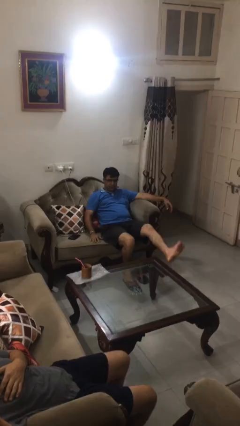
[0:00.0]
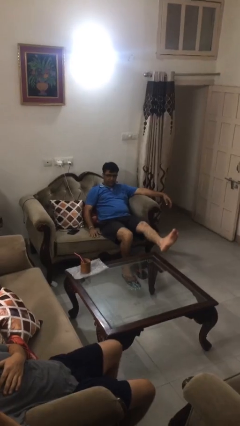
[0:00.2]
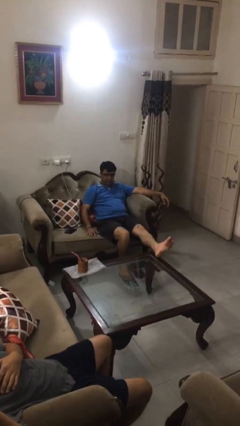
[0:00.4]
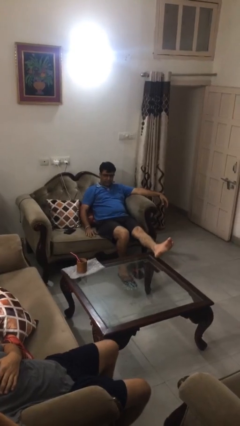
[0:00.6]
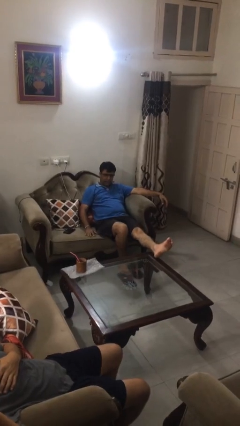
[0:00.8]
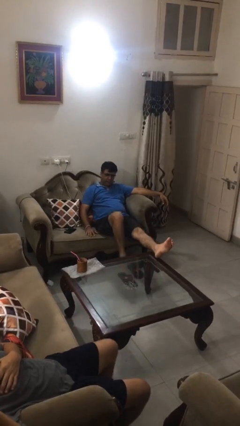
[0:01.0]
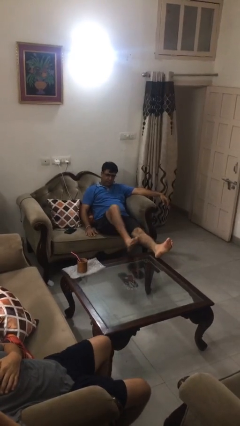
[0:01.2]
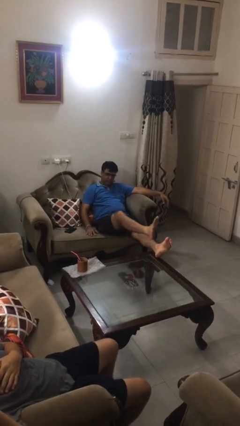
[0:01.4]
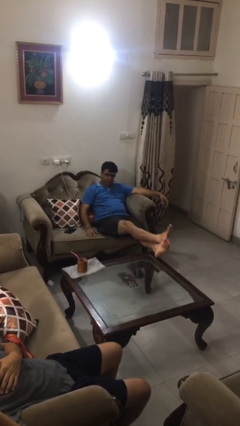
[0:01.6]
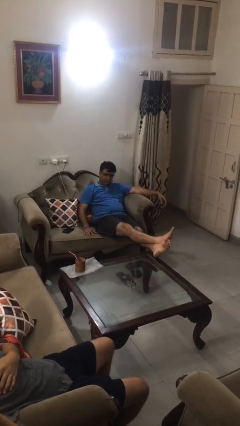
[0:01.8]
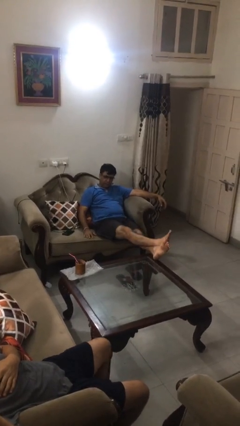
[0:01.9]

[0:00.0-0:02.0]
person puts feet up

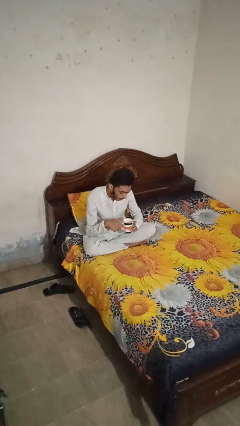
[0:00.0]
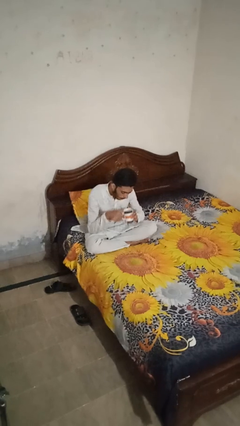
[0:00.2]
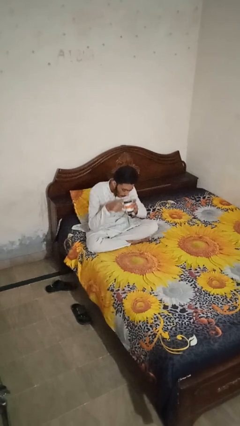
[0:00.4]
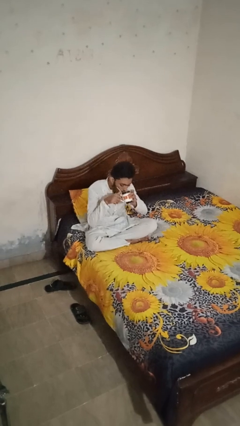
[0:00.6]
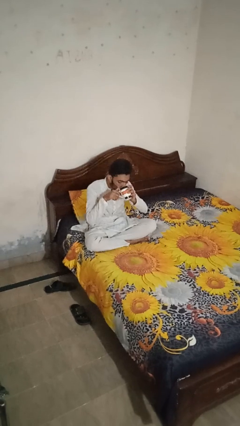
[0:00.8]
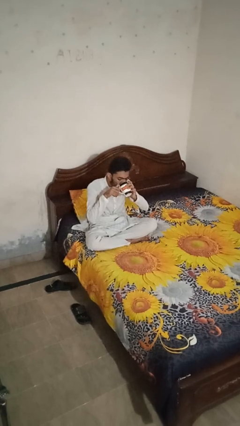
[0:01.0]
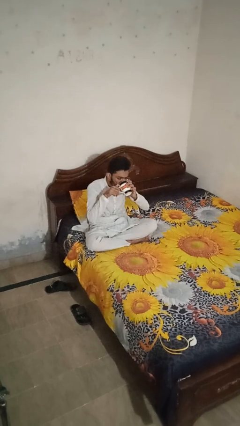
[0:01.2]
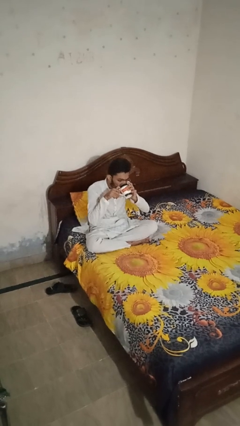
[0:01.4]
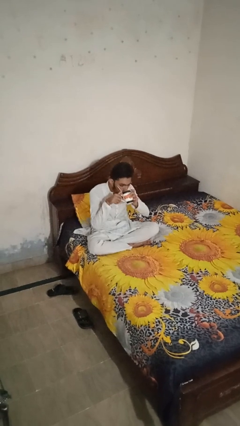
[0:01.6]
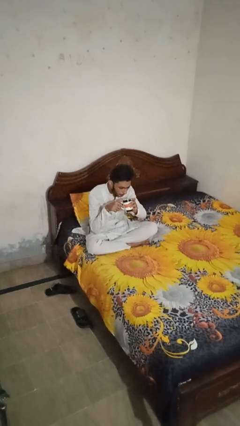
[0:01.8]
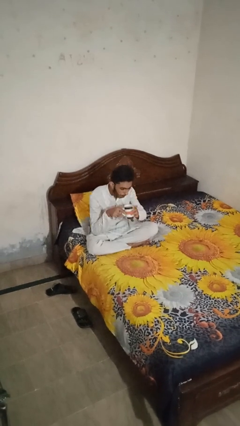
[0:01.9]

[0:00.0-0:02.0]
person drinks from mug

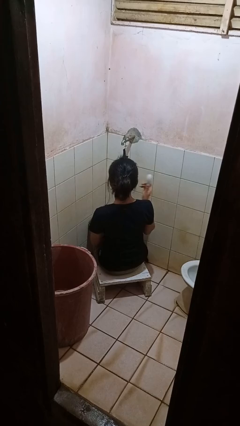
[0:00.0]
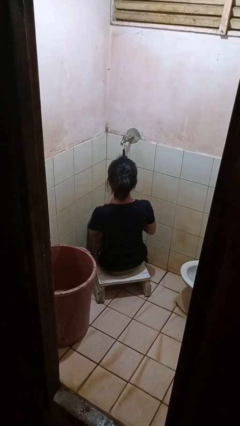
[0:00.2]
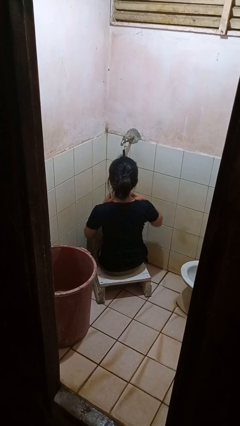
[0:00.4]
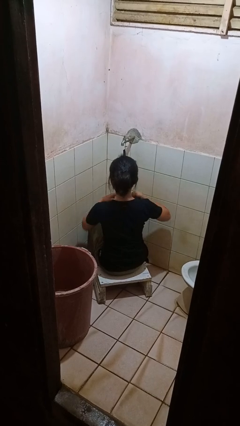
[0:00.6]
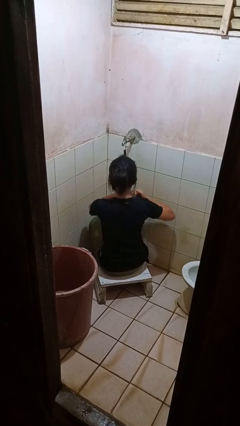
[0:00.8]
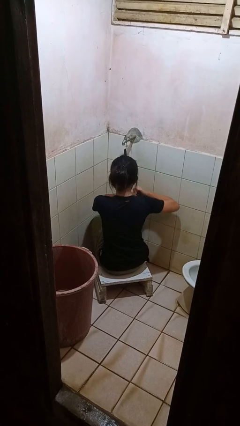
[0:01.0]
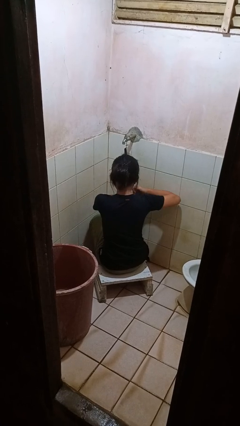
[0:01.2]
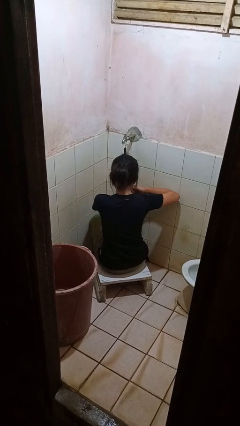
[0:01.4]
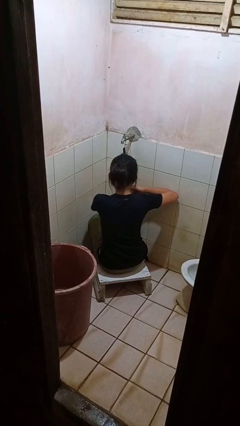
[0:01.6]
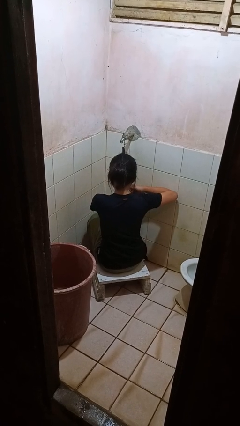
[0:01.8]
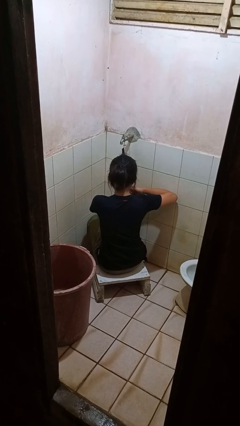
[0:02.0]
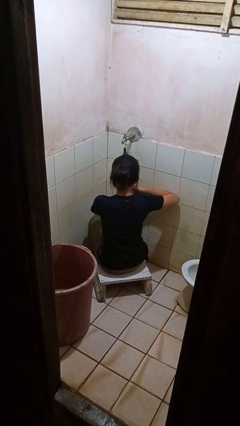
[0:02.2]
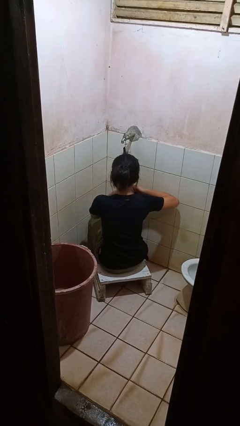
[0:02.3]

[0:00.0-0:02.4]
person applies deodorant

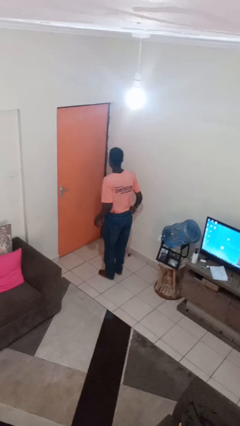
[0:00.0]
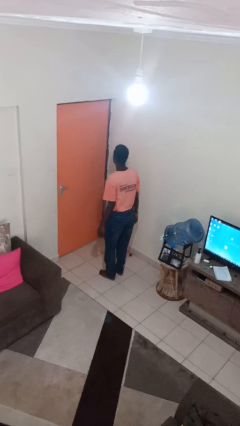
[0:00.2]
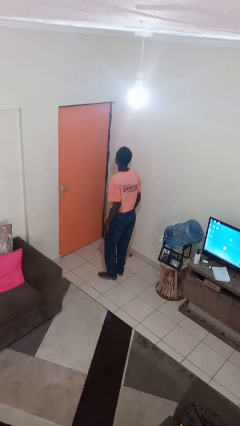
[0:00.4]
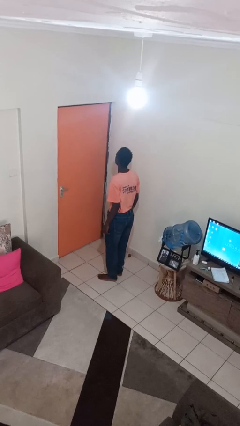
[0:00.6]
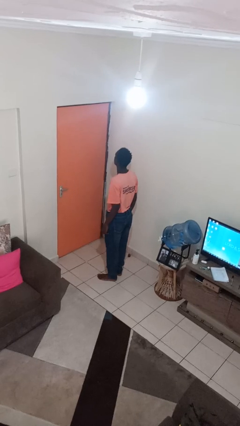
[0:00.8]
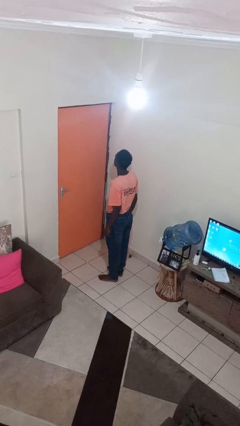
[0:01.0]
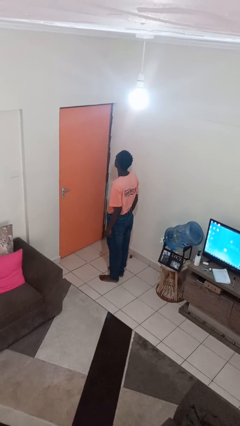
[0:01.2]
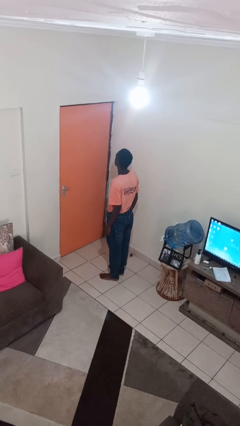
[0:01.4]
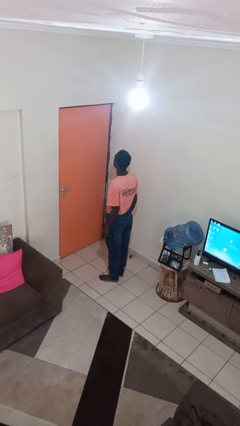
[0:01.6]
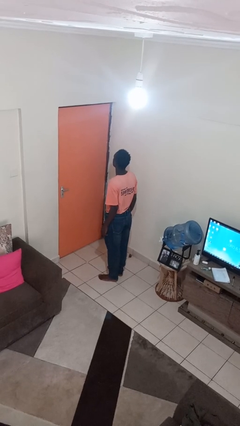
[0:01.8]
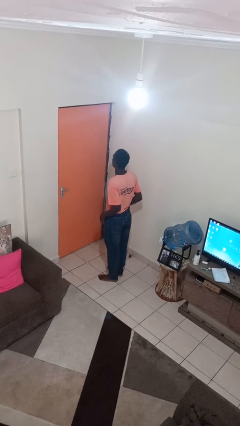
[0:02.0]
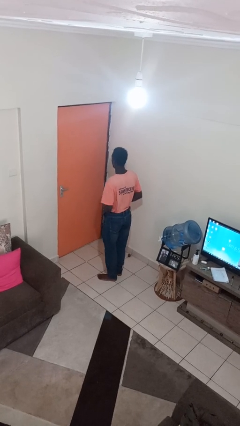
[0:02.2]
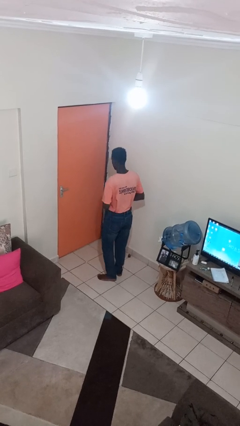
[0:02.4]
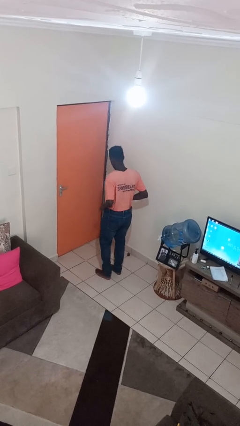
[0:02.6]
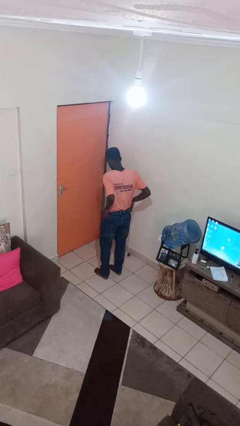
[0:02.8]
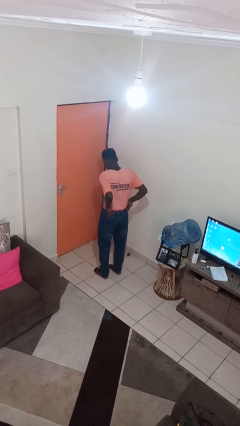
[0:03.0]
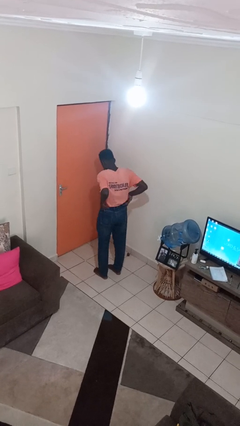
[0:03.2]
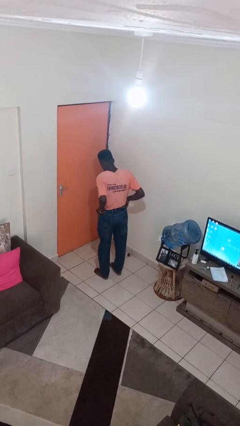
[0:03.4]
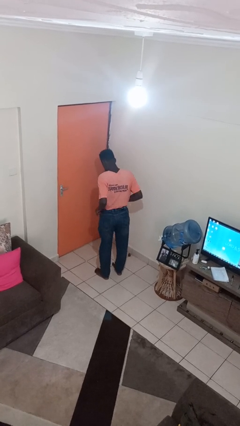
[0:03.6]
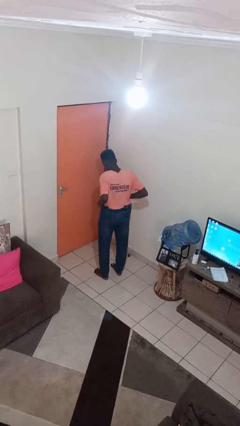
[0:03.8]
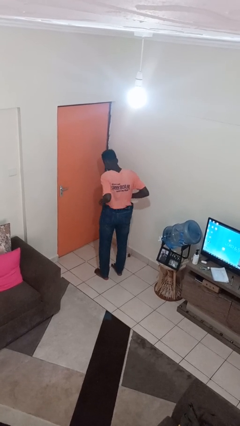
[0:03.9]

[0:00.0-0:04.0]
person hikes up pants

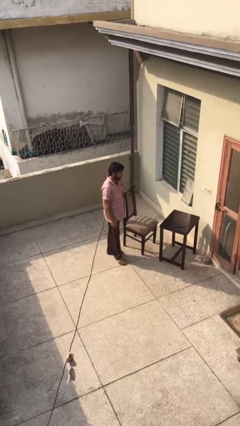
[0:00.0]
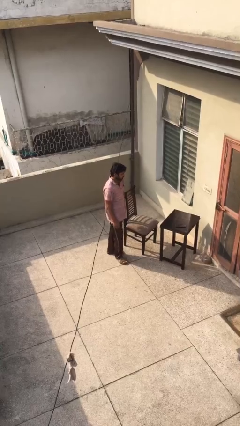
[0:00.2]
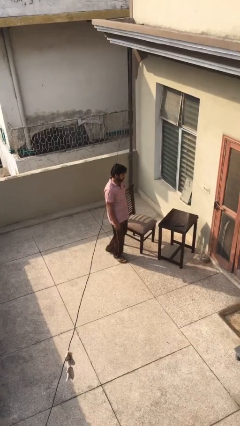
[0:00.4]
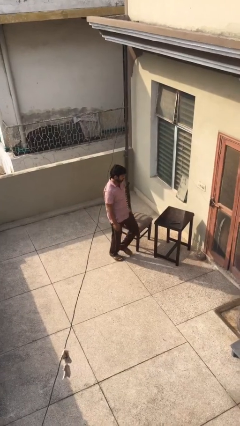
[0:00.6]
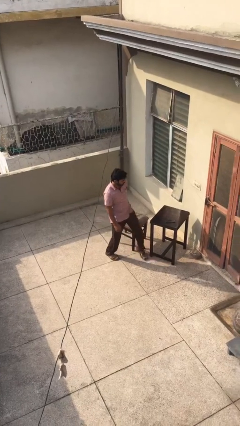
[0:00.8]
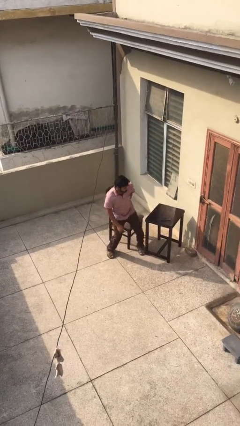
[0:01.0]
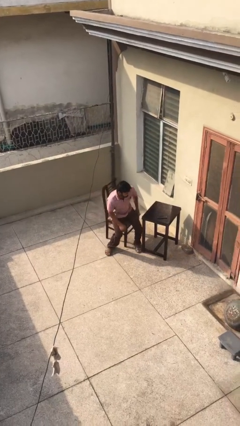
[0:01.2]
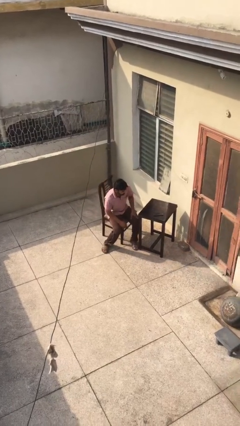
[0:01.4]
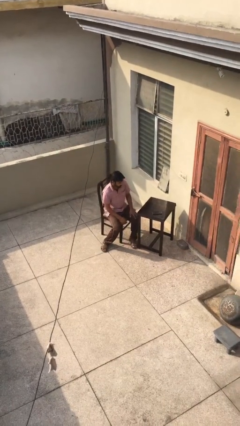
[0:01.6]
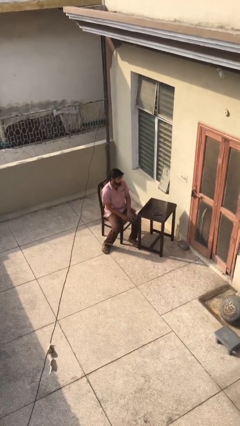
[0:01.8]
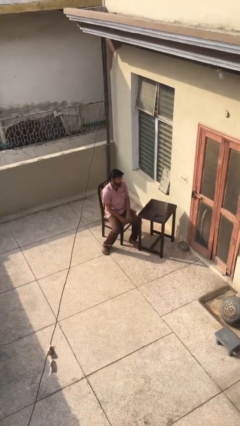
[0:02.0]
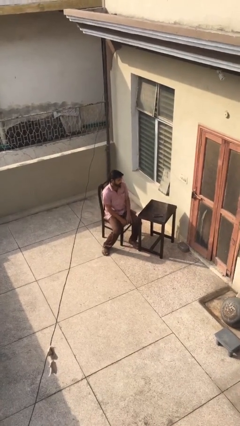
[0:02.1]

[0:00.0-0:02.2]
person sits down

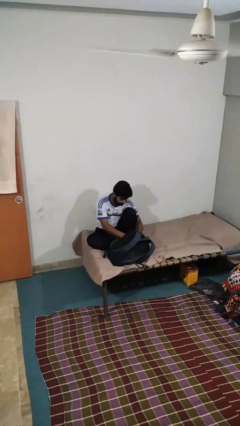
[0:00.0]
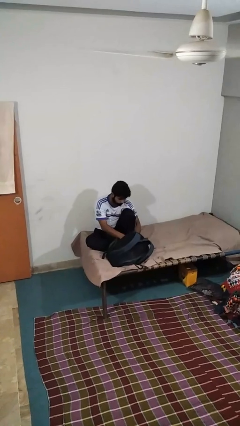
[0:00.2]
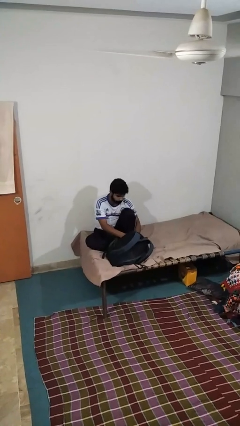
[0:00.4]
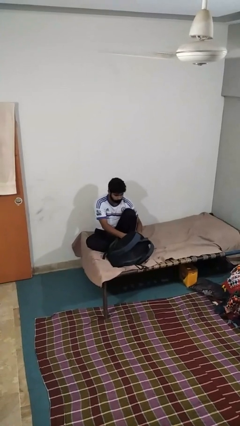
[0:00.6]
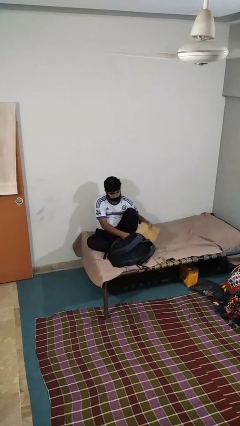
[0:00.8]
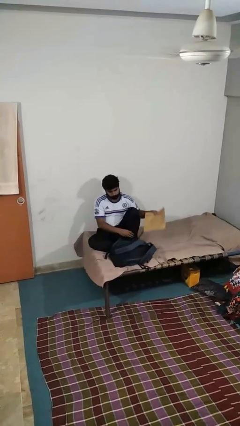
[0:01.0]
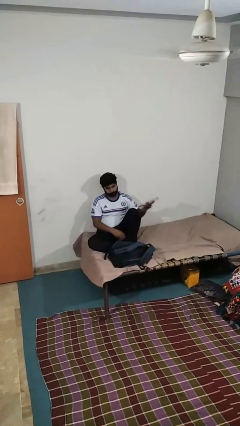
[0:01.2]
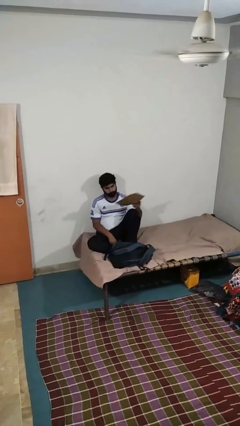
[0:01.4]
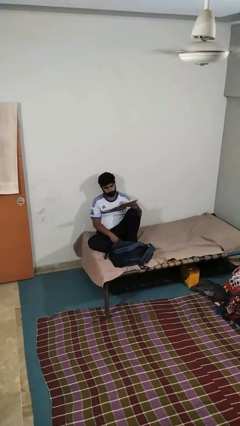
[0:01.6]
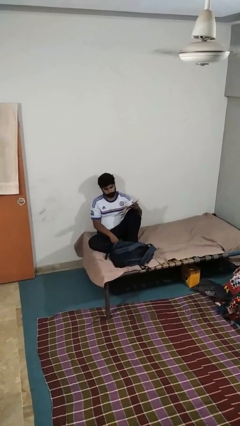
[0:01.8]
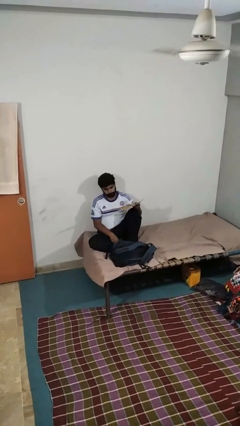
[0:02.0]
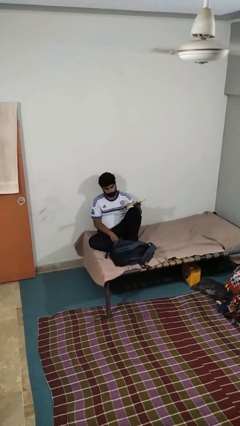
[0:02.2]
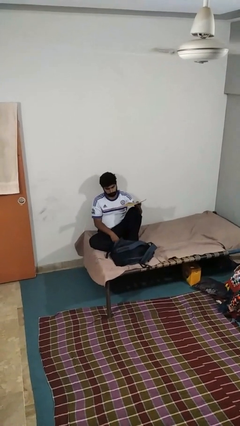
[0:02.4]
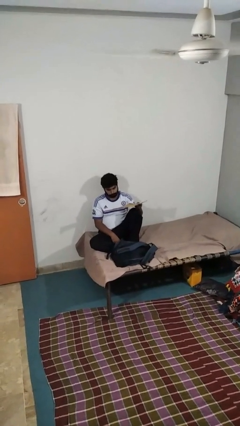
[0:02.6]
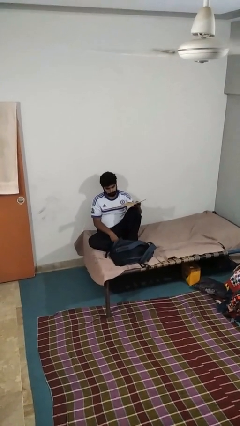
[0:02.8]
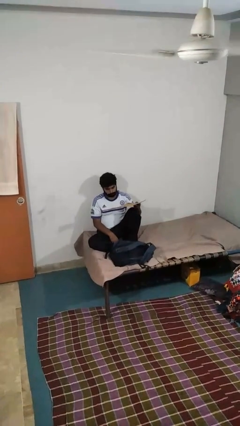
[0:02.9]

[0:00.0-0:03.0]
person takes object from backpack

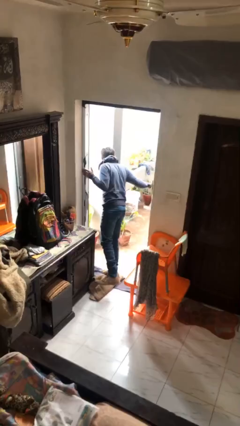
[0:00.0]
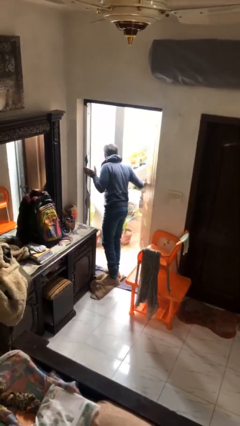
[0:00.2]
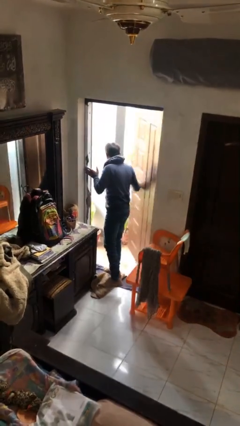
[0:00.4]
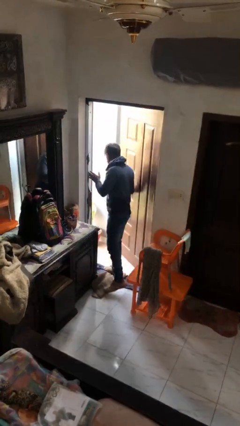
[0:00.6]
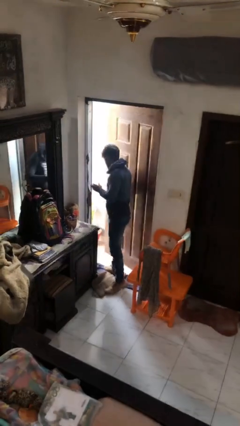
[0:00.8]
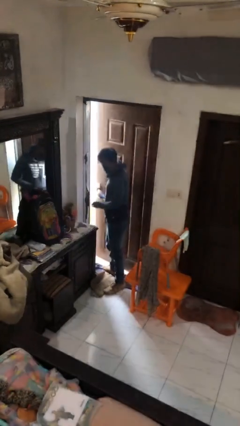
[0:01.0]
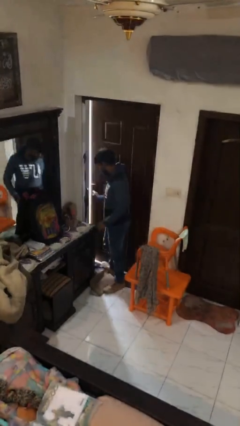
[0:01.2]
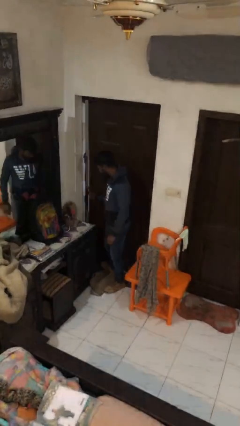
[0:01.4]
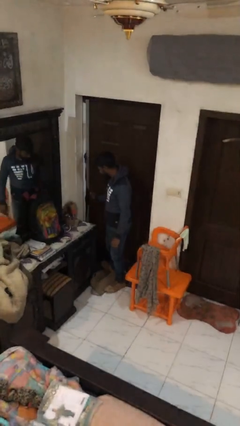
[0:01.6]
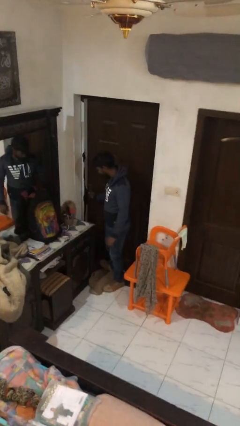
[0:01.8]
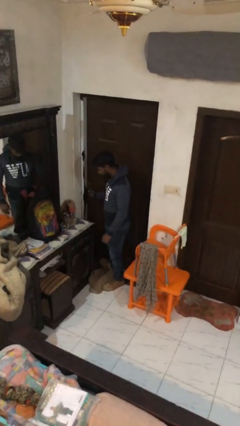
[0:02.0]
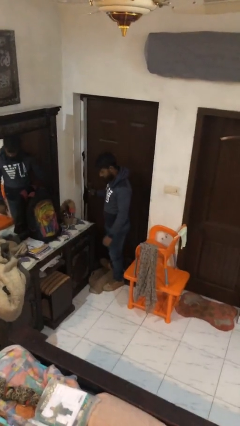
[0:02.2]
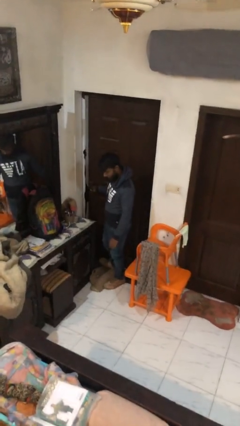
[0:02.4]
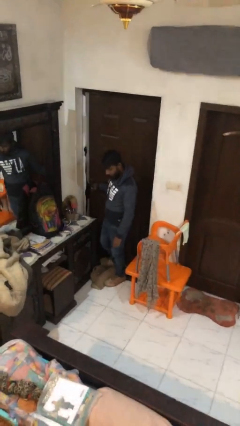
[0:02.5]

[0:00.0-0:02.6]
person closes facility door
